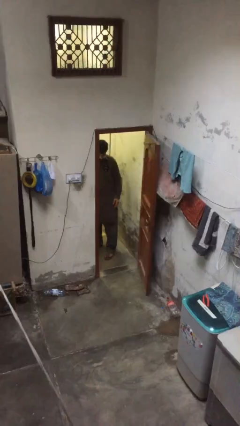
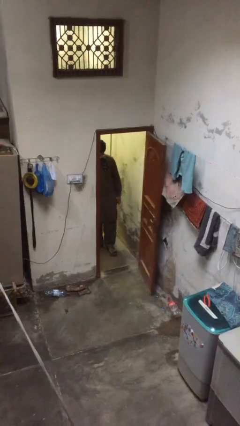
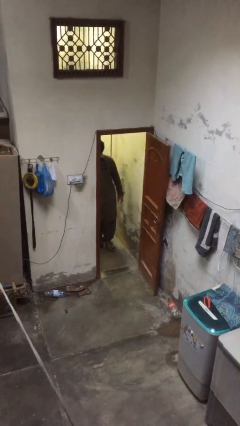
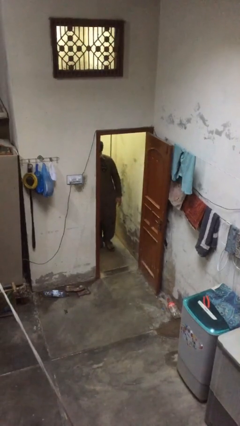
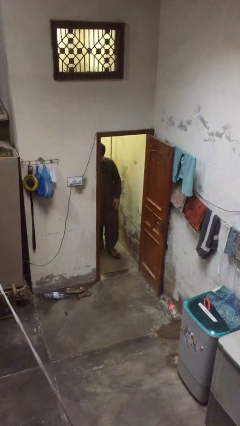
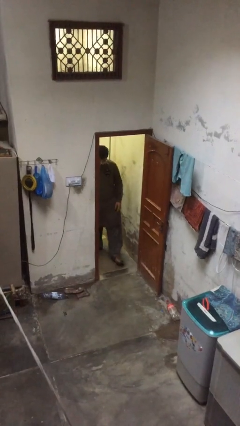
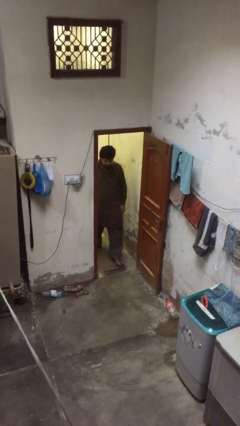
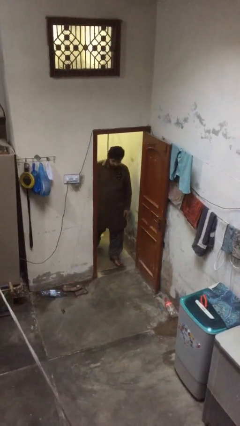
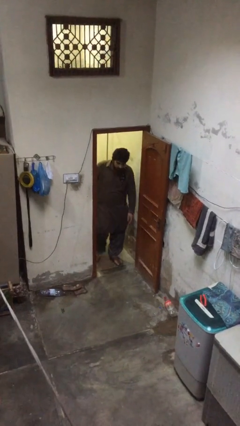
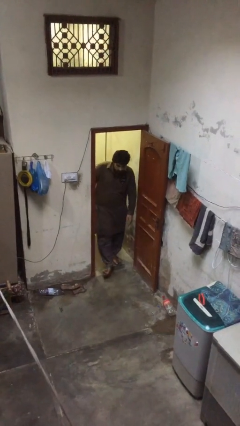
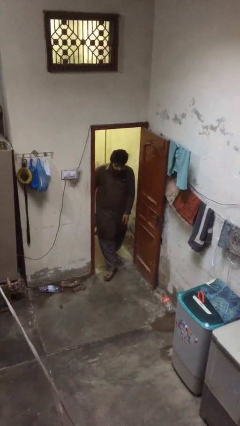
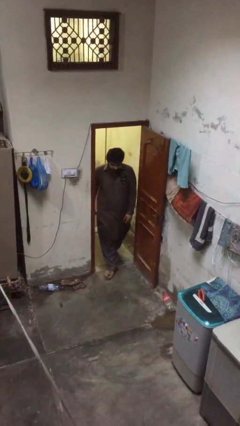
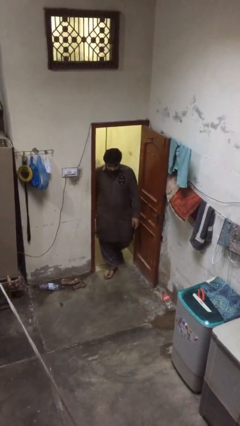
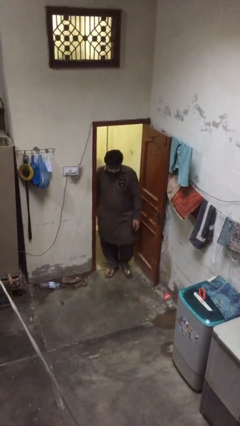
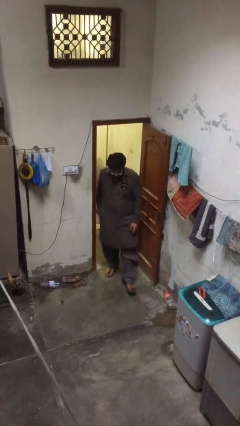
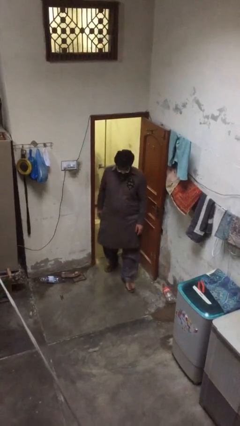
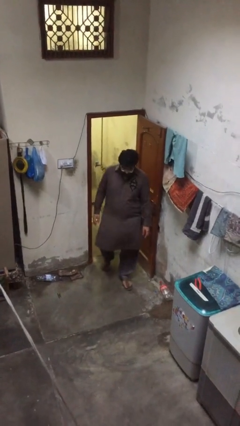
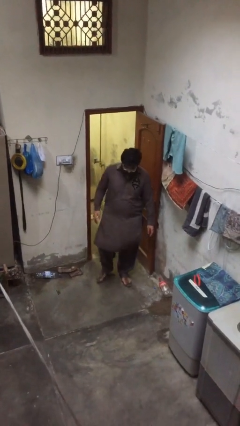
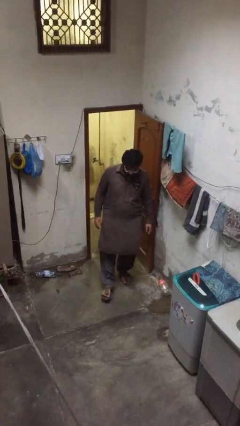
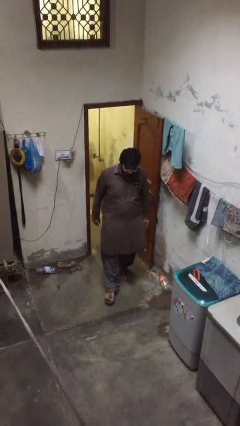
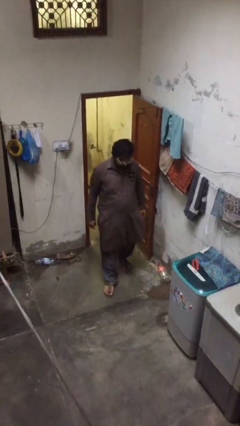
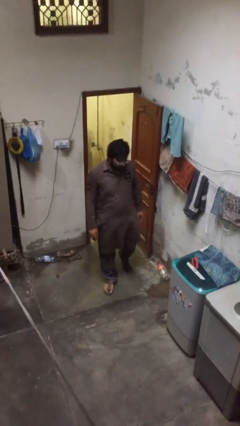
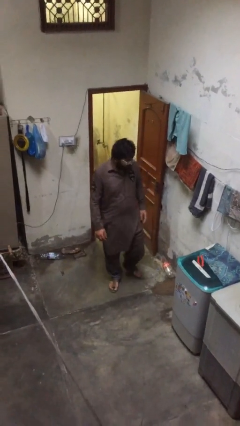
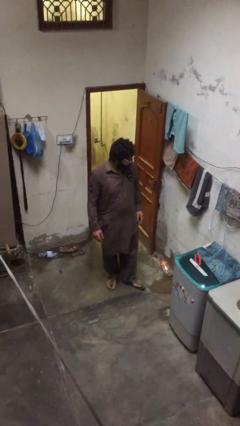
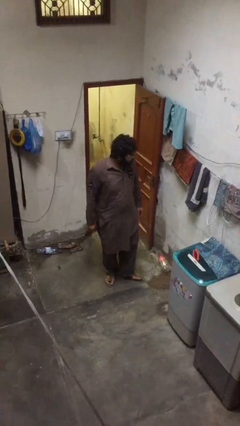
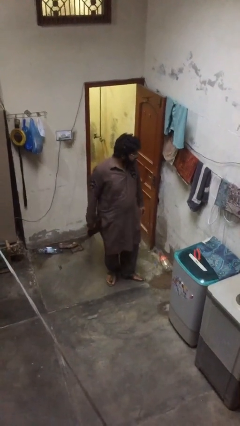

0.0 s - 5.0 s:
person enters scene through structure

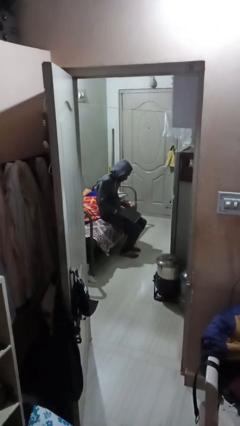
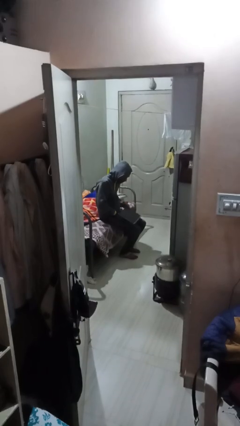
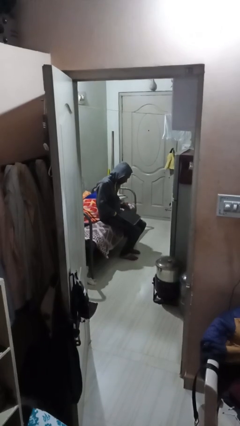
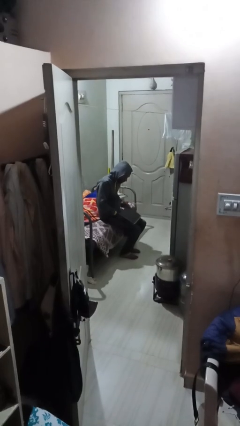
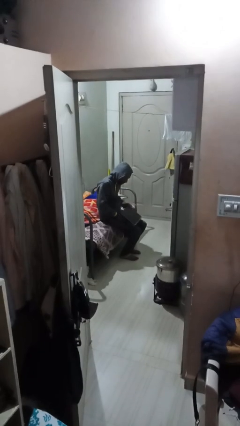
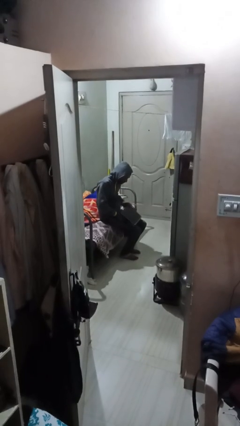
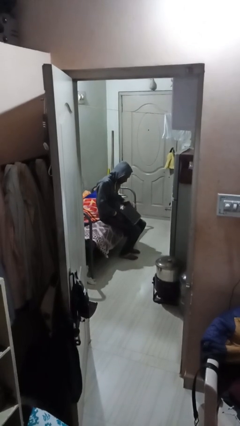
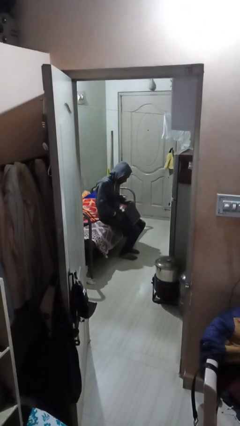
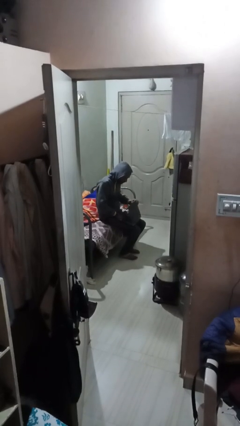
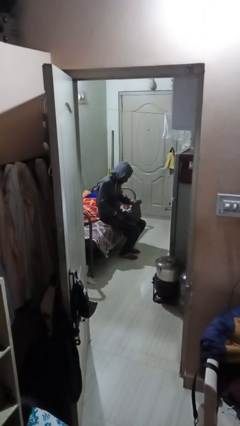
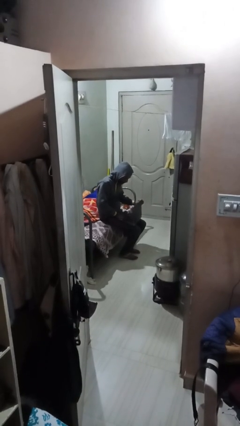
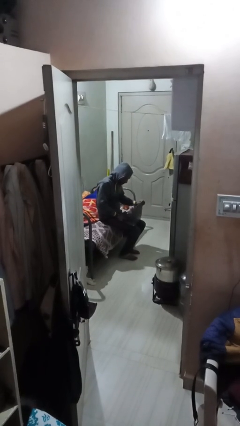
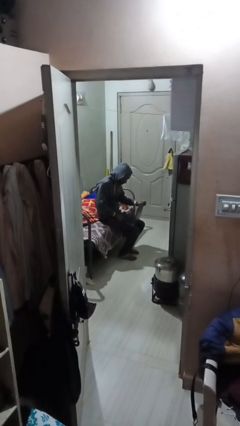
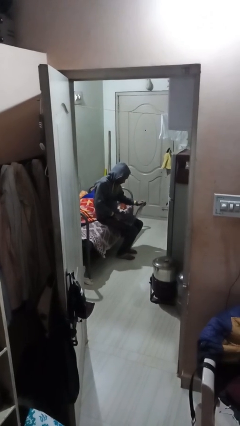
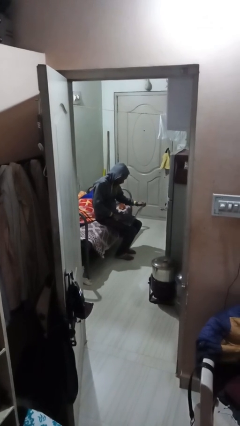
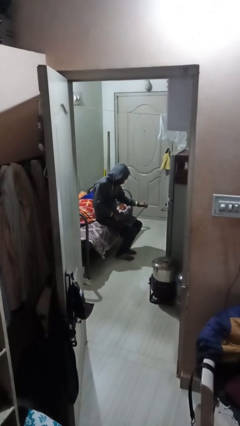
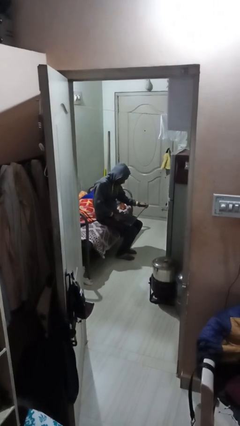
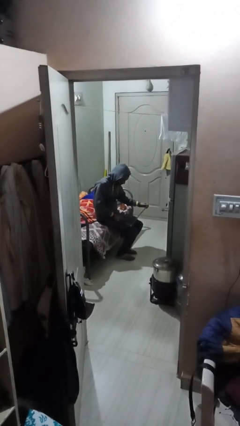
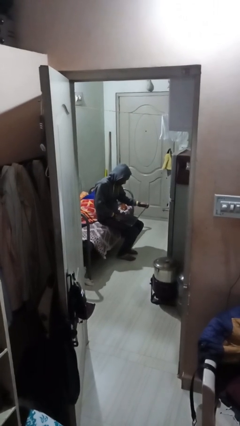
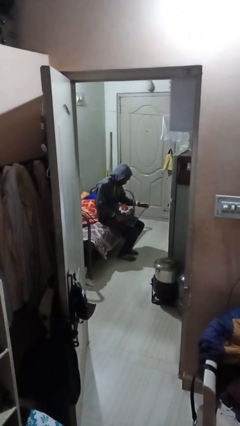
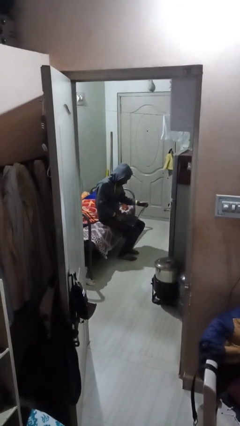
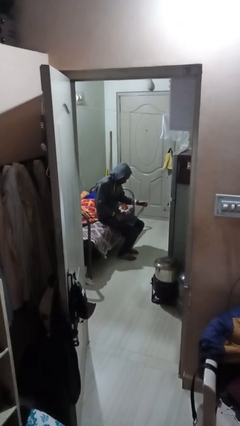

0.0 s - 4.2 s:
person interacts with laptop

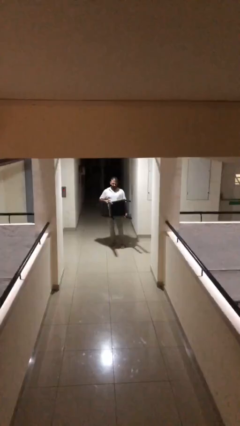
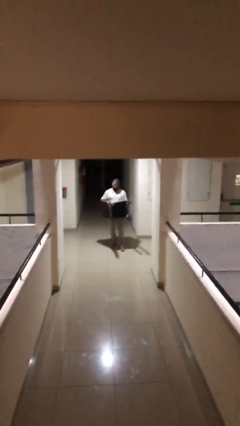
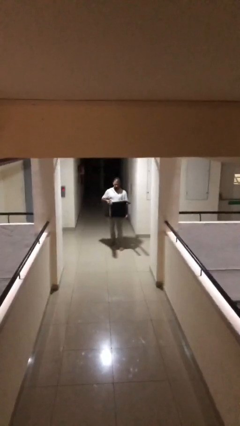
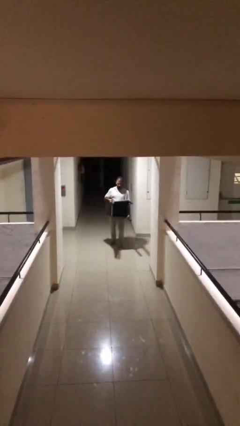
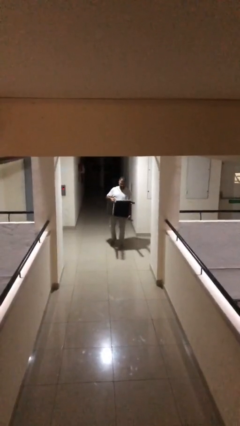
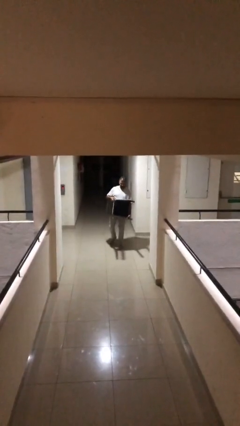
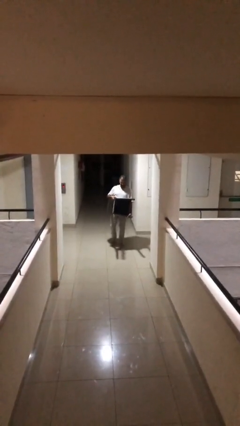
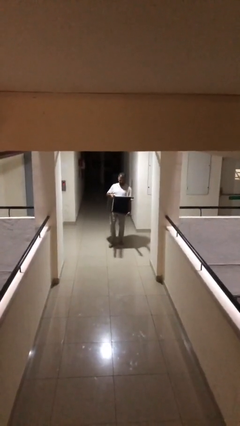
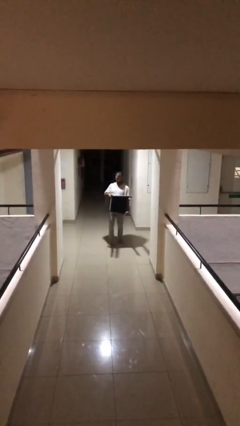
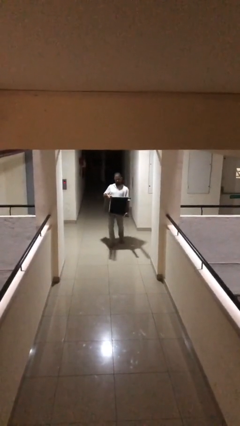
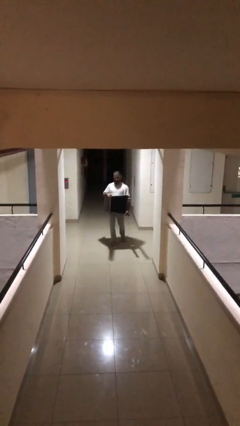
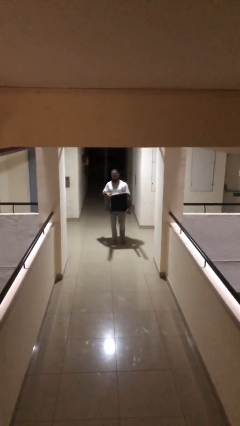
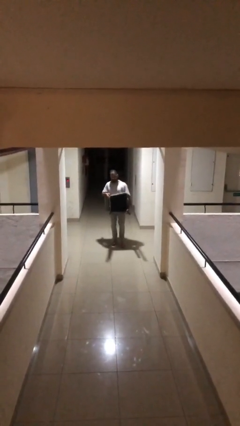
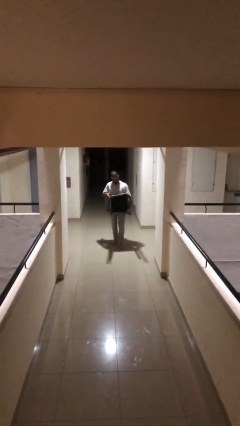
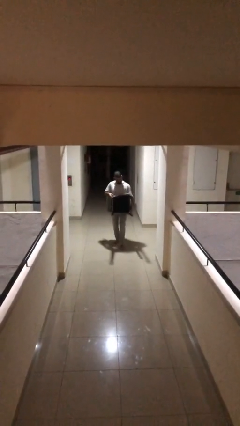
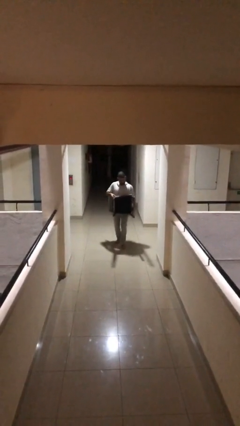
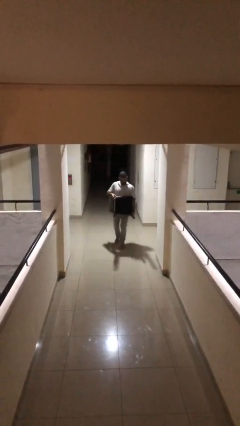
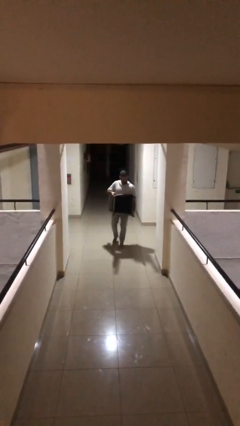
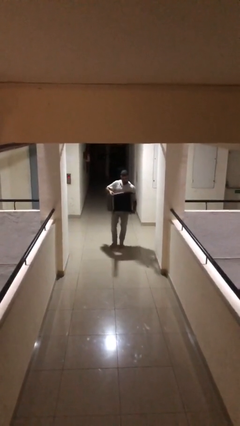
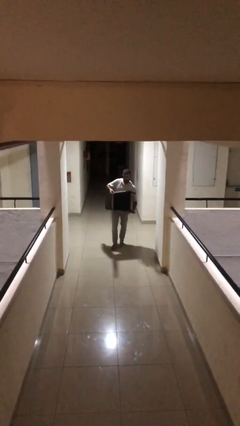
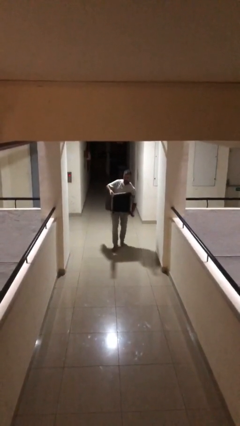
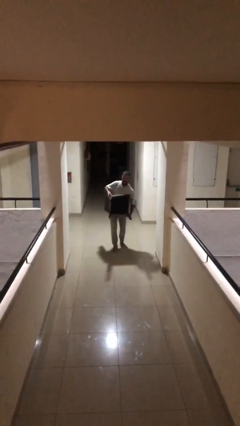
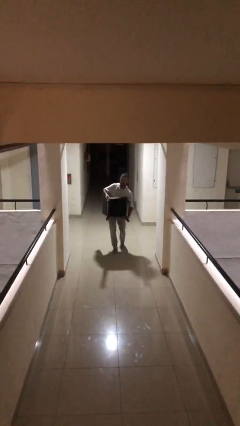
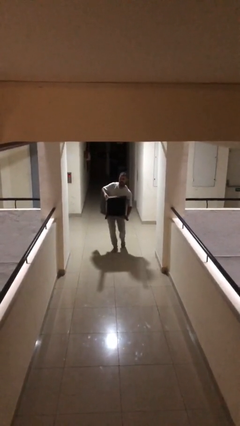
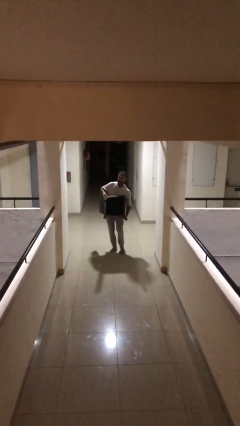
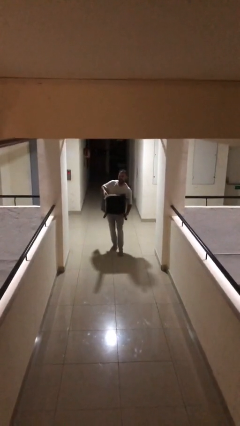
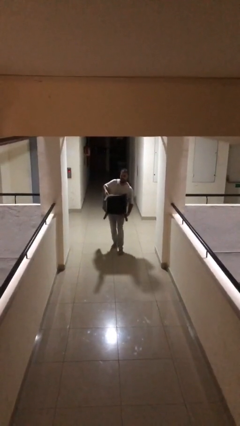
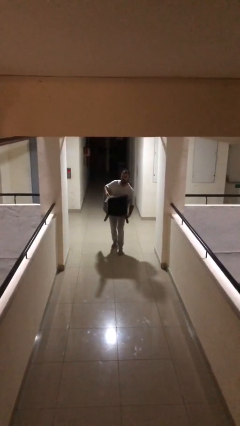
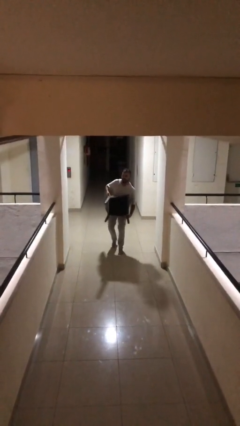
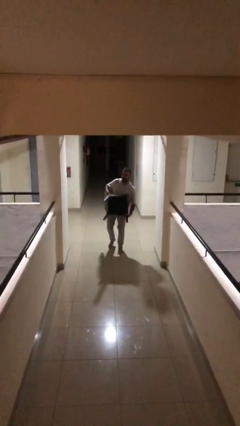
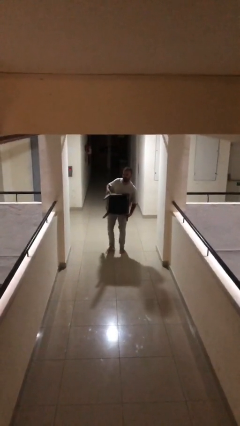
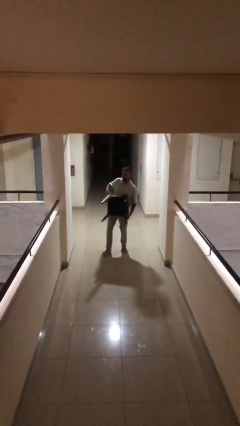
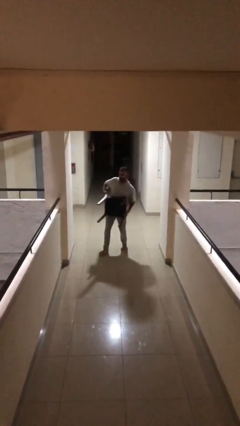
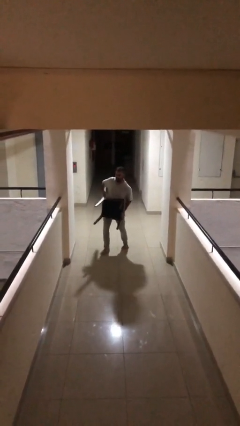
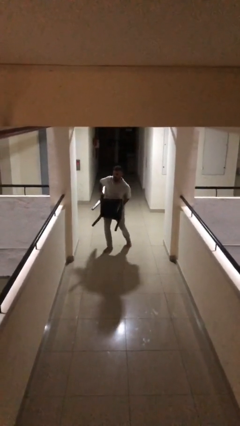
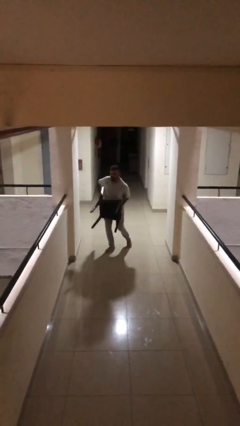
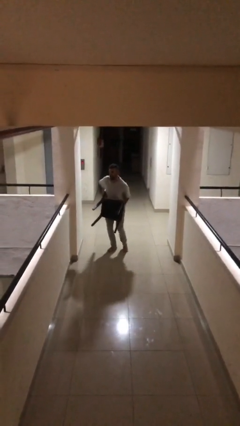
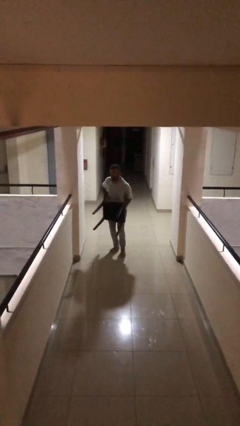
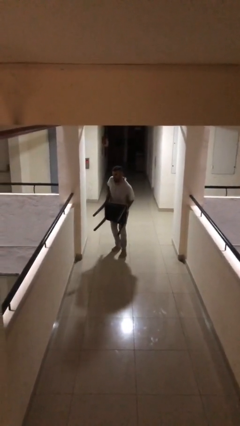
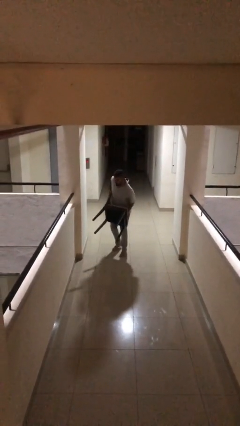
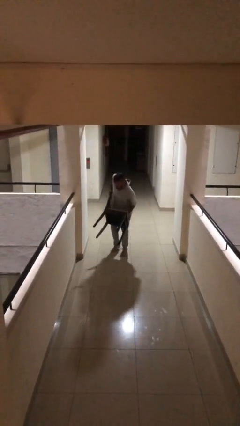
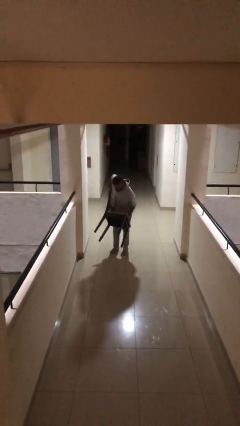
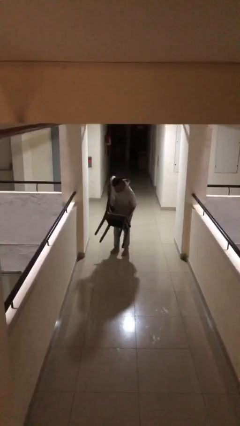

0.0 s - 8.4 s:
person carries heavy object

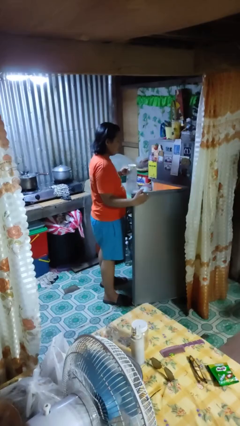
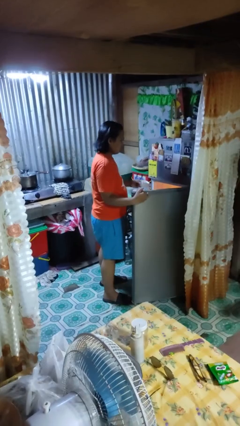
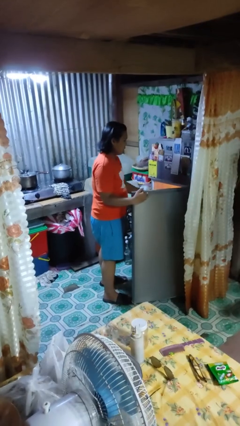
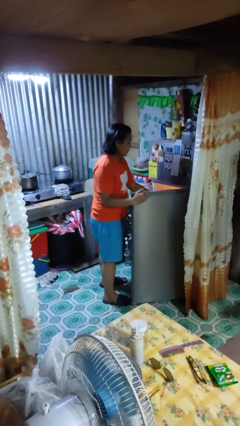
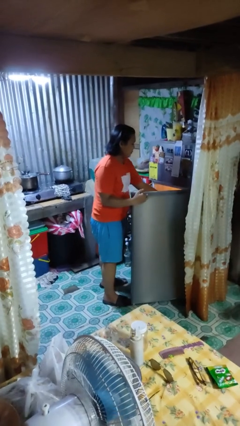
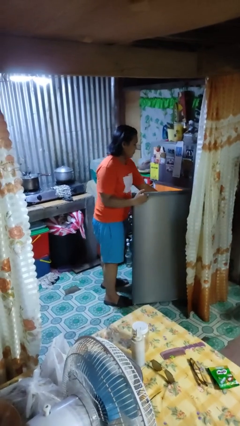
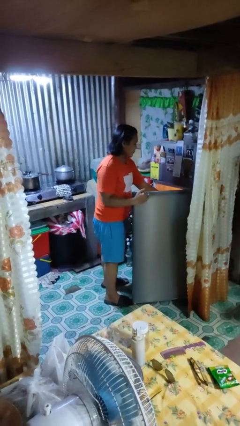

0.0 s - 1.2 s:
person puts object into refrigerator
